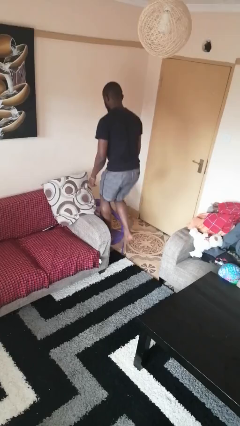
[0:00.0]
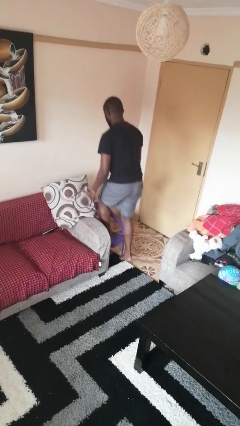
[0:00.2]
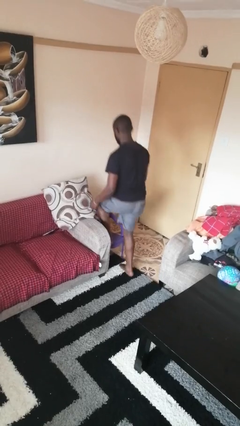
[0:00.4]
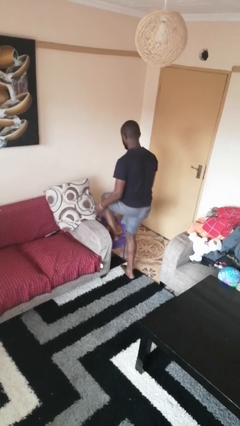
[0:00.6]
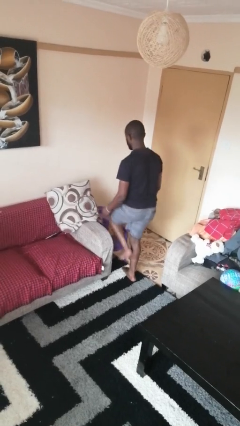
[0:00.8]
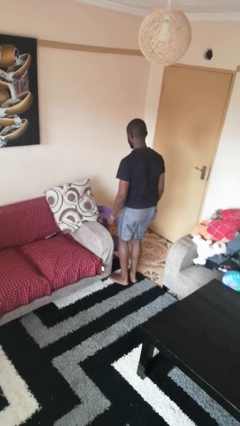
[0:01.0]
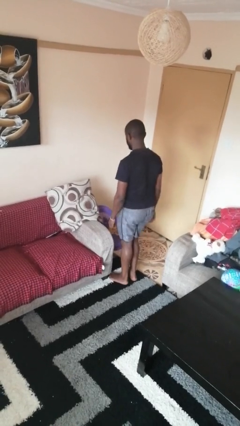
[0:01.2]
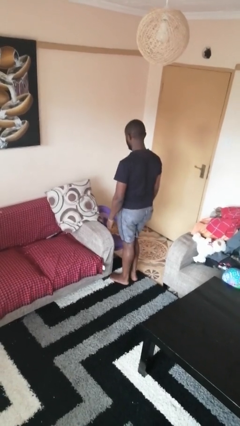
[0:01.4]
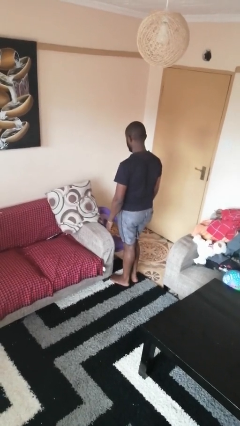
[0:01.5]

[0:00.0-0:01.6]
person climbs off chair

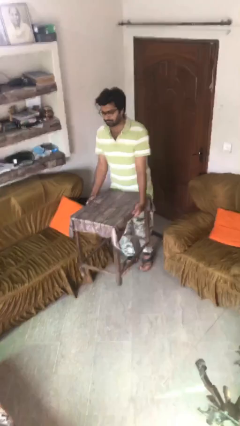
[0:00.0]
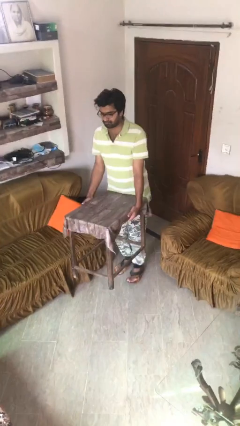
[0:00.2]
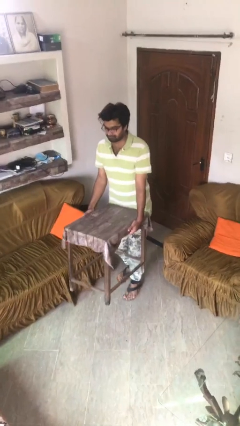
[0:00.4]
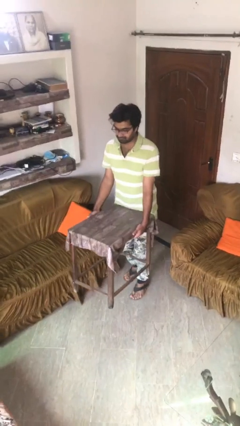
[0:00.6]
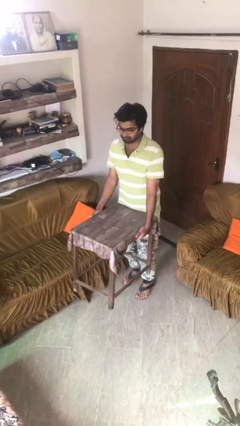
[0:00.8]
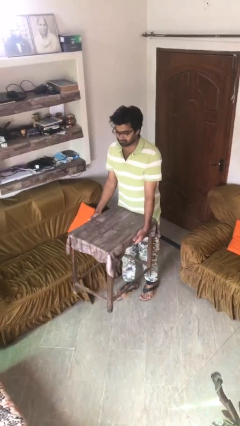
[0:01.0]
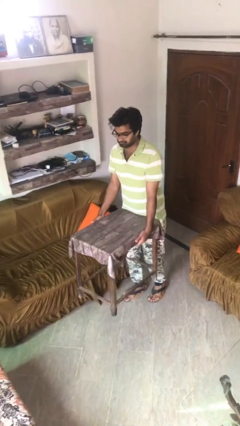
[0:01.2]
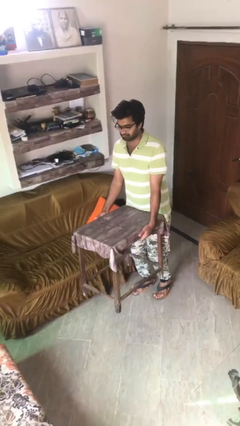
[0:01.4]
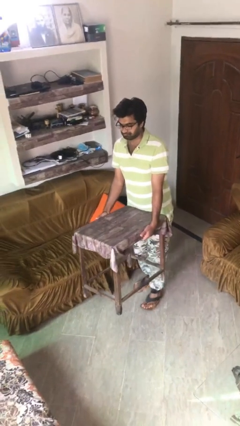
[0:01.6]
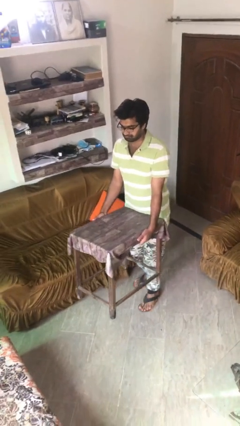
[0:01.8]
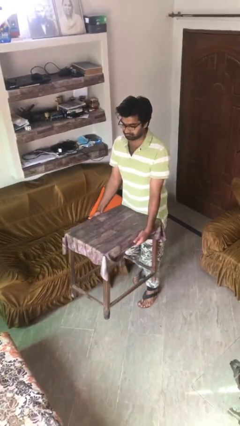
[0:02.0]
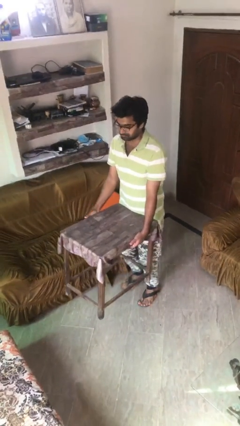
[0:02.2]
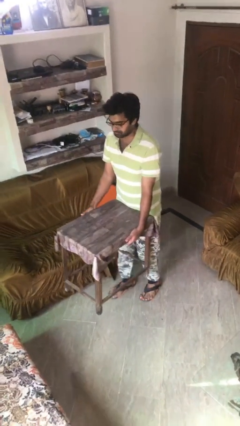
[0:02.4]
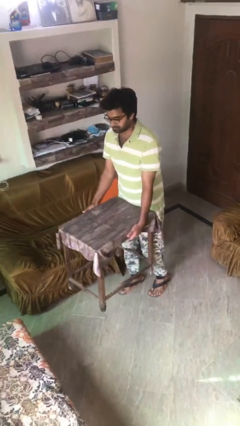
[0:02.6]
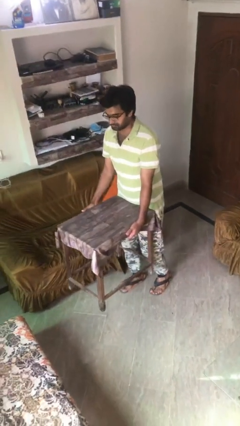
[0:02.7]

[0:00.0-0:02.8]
person carries heavy object

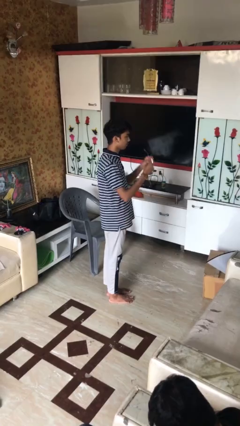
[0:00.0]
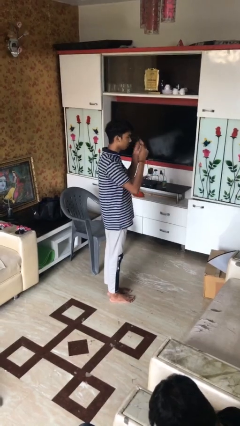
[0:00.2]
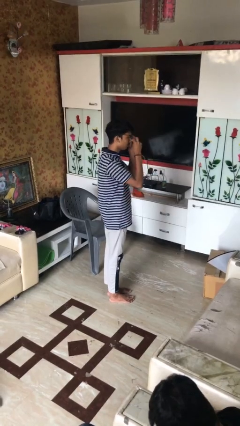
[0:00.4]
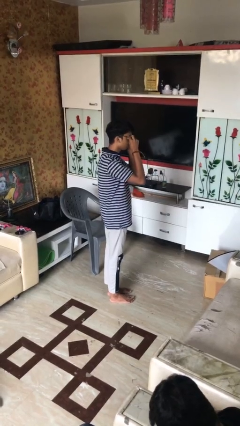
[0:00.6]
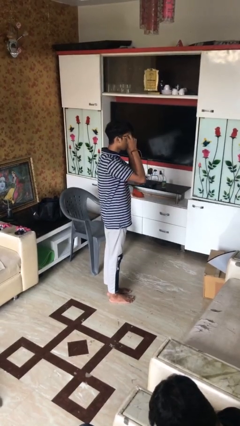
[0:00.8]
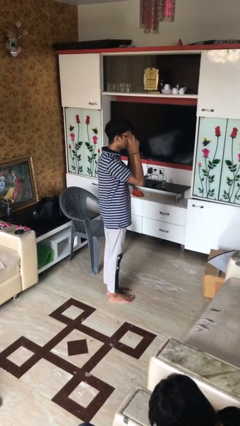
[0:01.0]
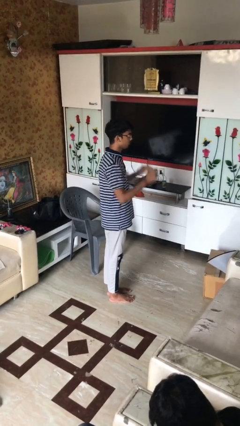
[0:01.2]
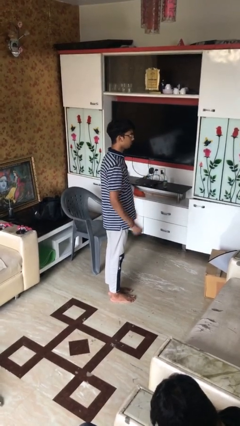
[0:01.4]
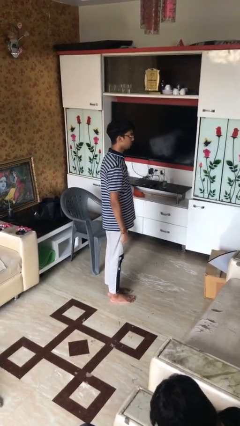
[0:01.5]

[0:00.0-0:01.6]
person puts on glasses

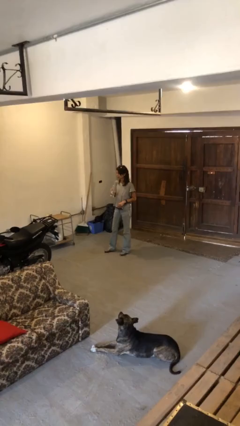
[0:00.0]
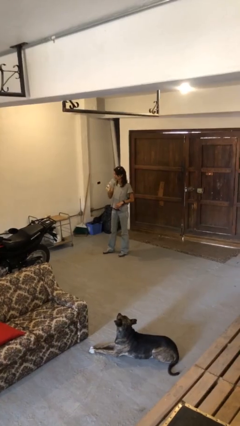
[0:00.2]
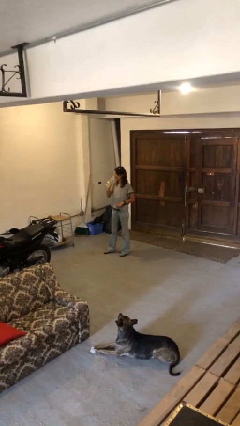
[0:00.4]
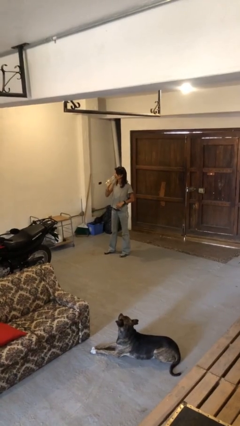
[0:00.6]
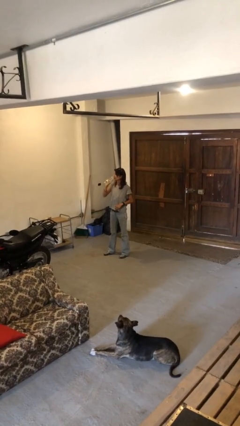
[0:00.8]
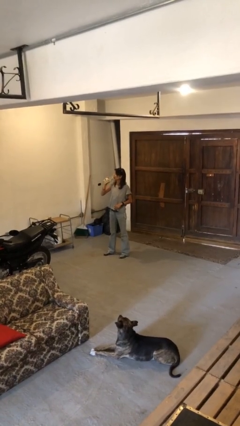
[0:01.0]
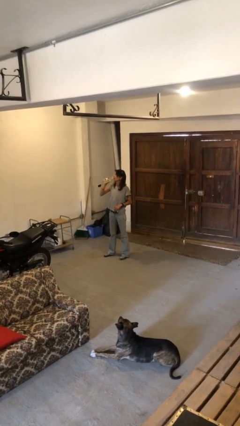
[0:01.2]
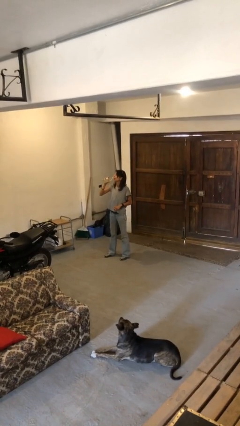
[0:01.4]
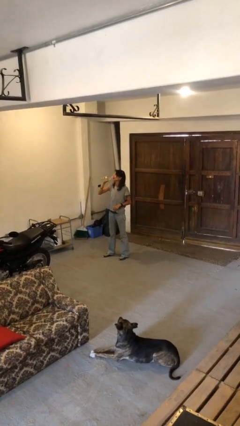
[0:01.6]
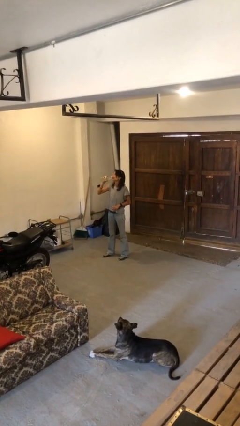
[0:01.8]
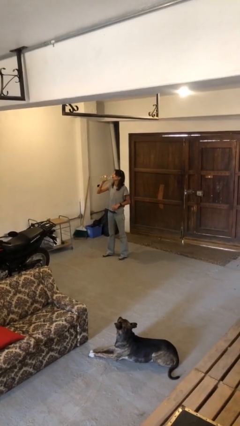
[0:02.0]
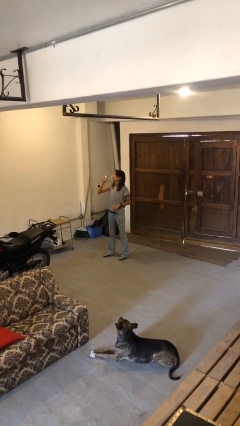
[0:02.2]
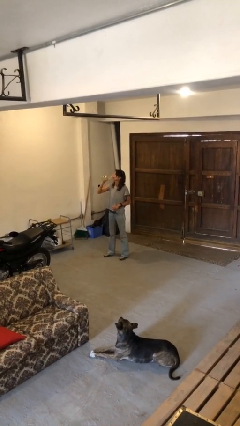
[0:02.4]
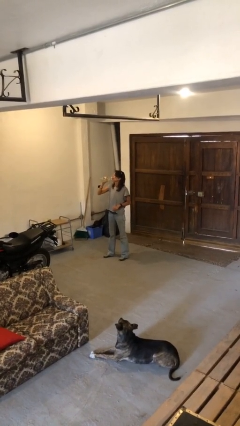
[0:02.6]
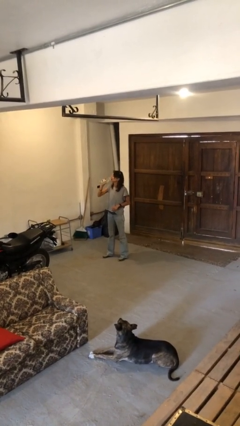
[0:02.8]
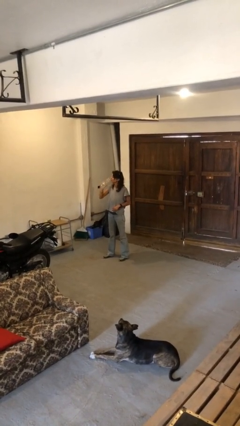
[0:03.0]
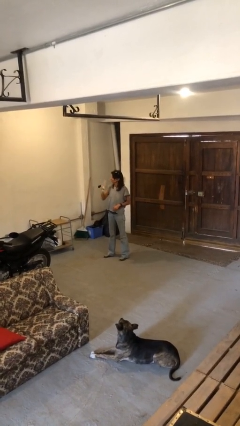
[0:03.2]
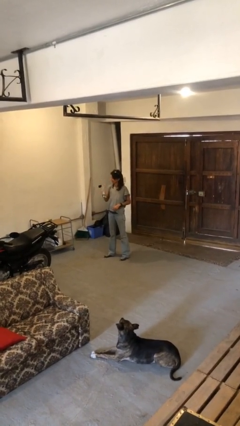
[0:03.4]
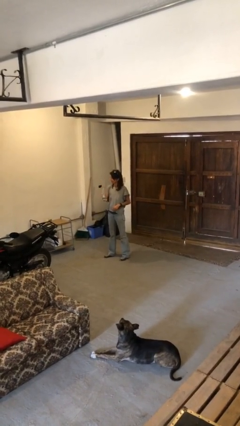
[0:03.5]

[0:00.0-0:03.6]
person drinks from bottle

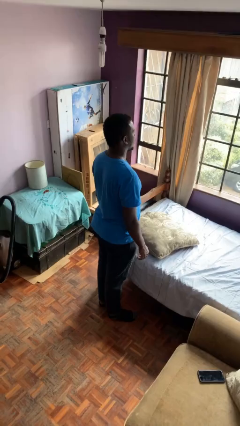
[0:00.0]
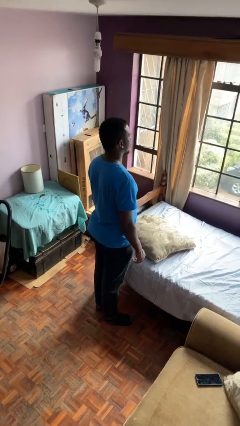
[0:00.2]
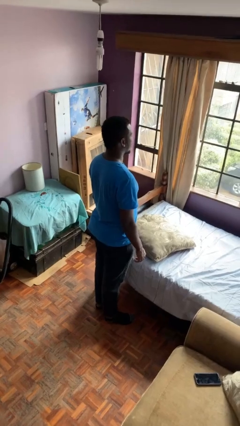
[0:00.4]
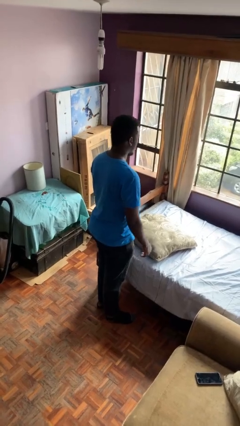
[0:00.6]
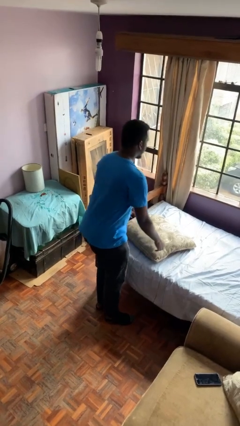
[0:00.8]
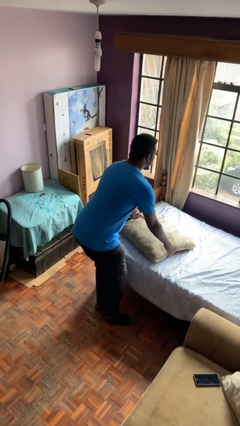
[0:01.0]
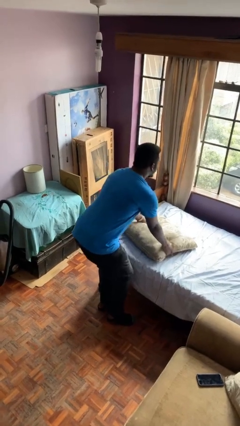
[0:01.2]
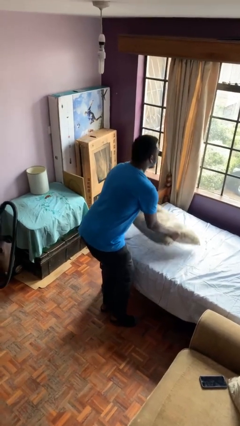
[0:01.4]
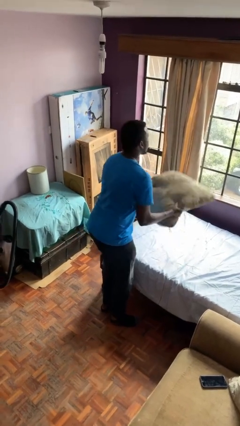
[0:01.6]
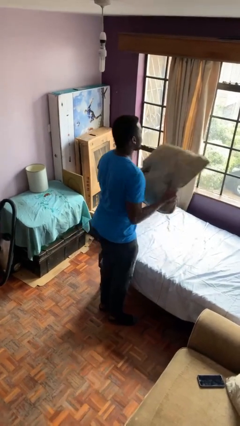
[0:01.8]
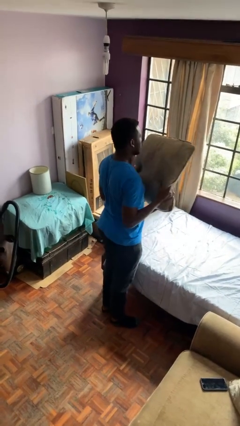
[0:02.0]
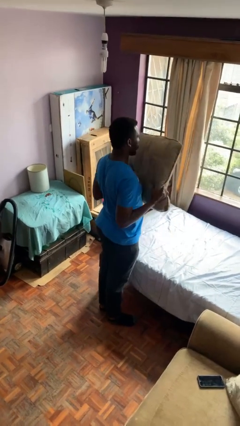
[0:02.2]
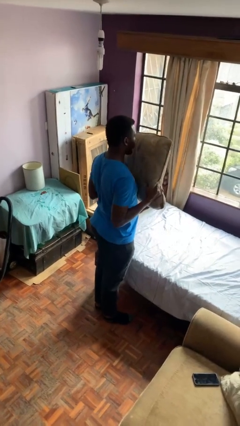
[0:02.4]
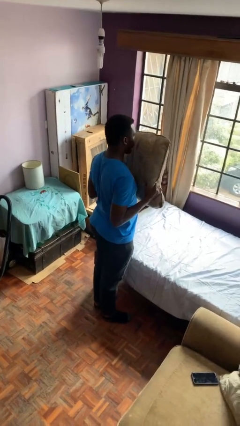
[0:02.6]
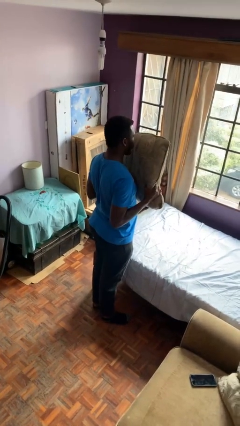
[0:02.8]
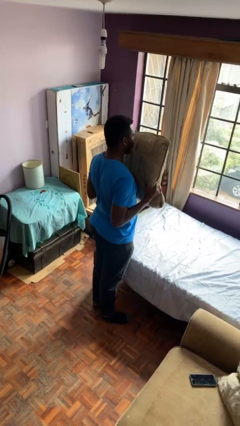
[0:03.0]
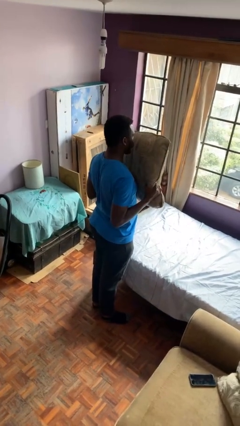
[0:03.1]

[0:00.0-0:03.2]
person picks up object from bed

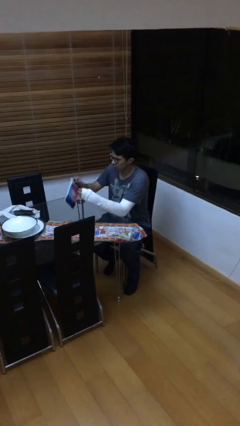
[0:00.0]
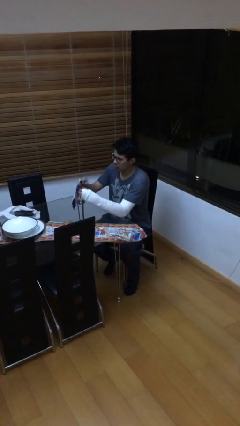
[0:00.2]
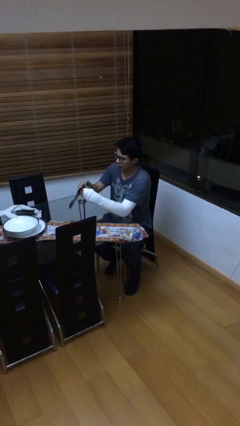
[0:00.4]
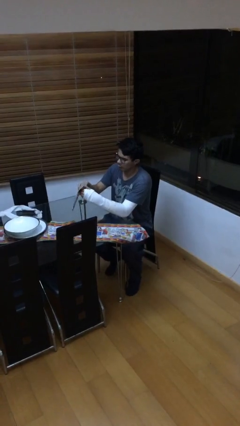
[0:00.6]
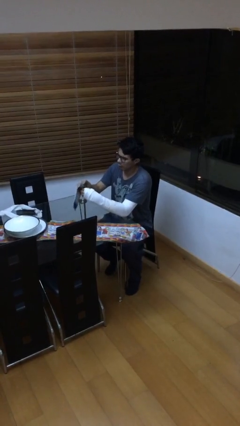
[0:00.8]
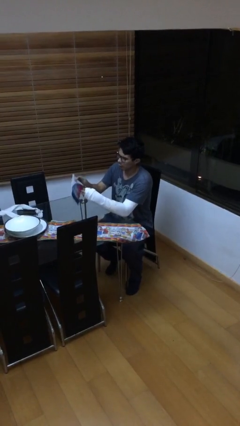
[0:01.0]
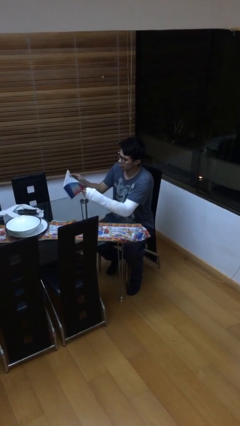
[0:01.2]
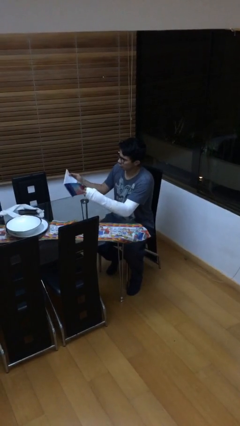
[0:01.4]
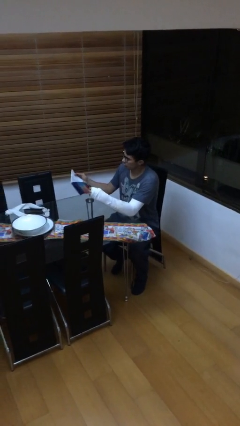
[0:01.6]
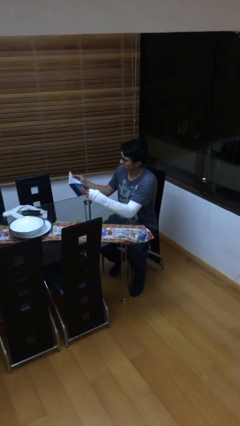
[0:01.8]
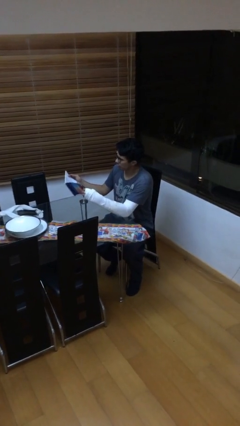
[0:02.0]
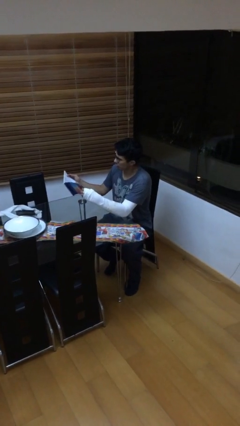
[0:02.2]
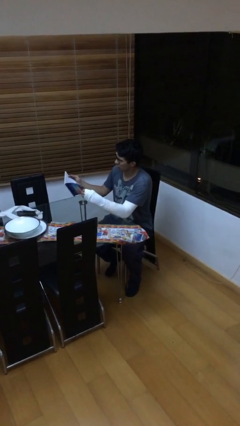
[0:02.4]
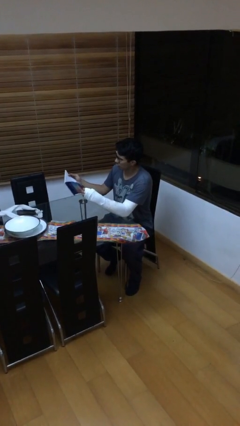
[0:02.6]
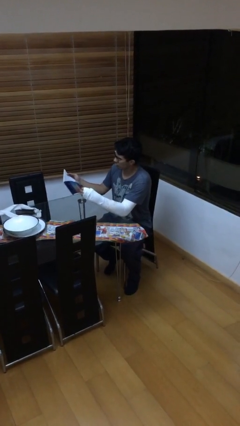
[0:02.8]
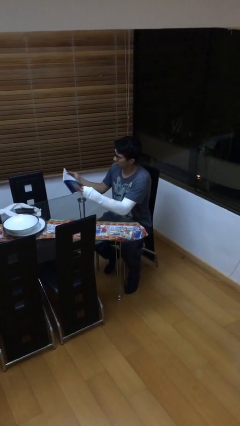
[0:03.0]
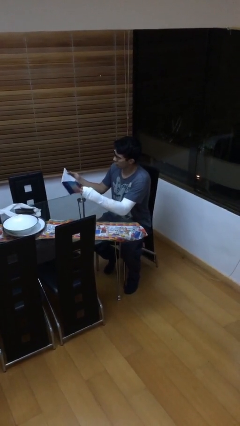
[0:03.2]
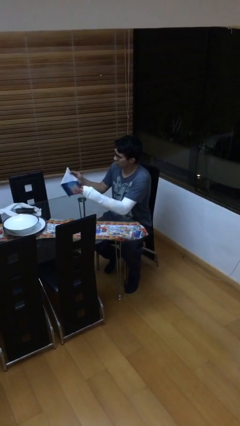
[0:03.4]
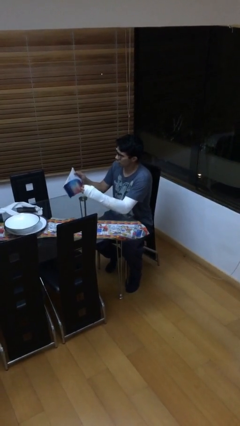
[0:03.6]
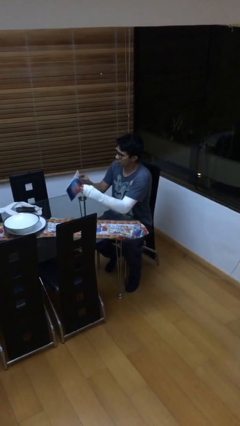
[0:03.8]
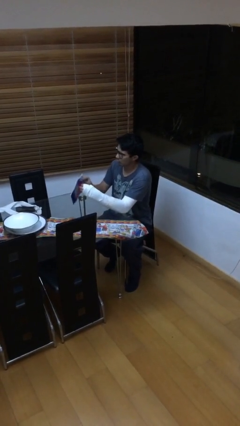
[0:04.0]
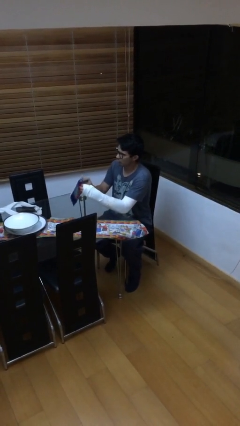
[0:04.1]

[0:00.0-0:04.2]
person reads document
